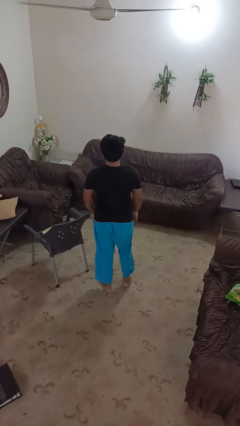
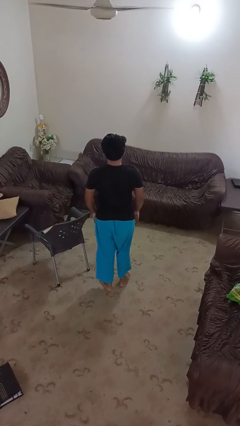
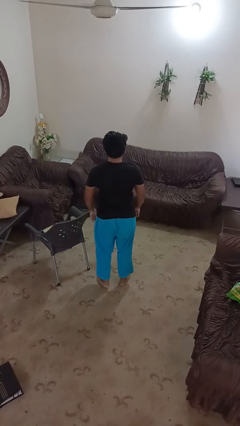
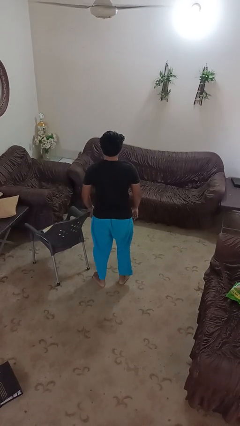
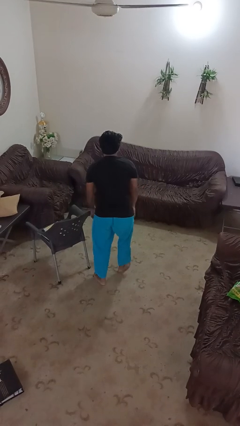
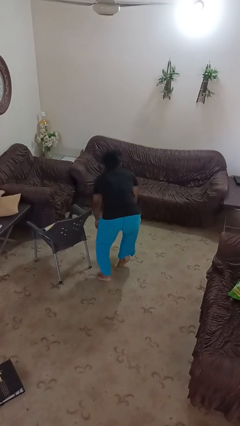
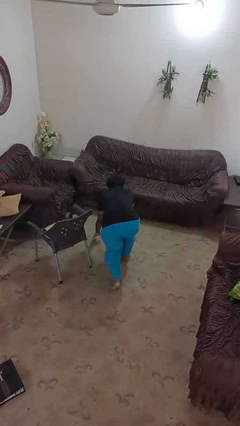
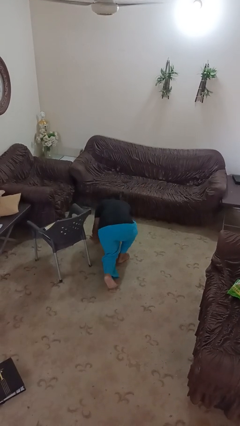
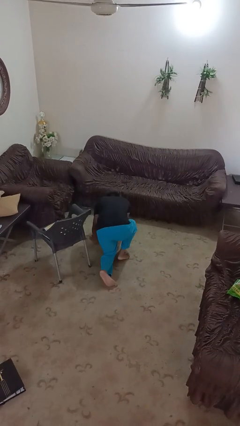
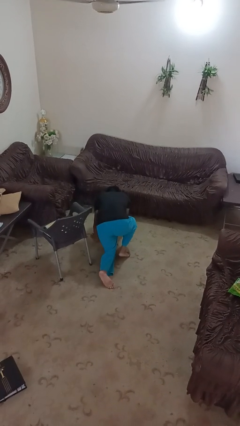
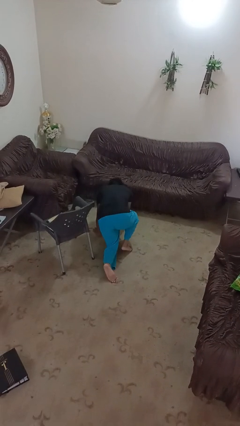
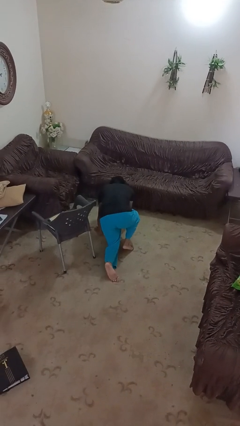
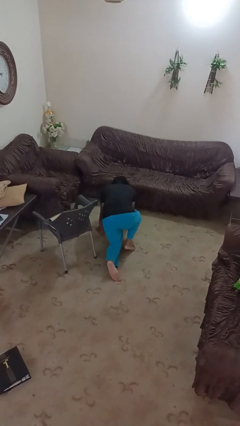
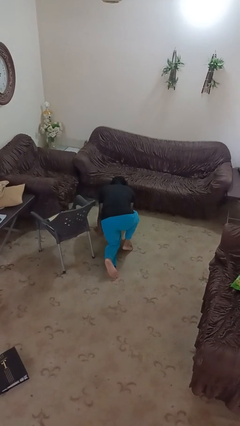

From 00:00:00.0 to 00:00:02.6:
person trips on object on floor

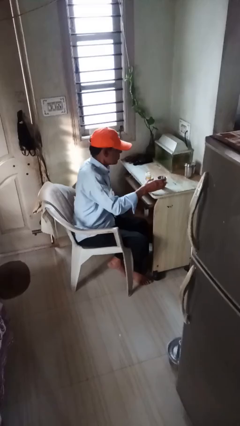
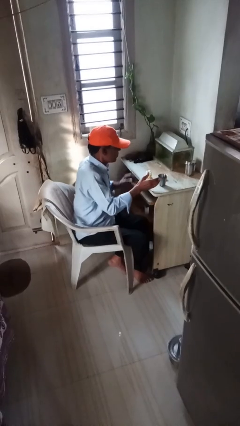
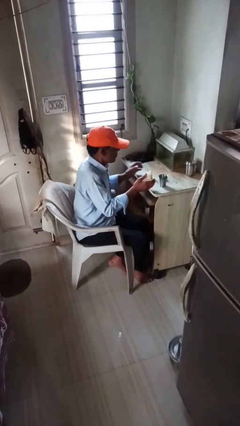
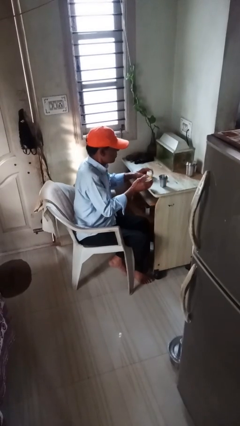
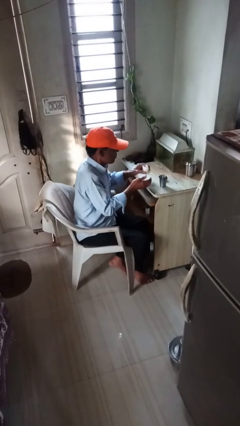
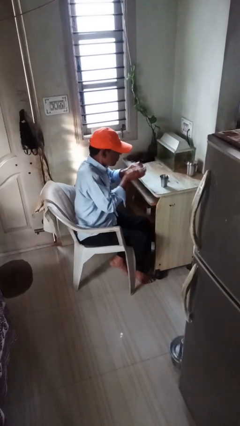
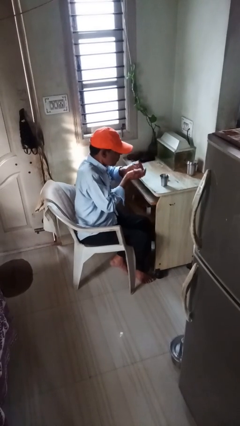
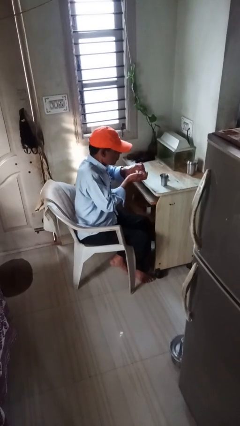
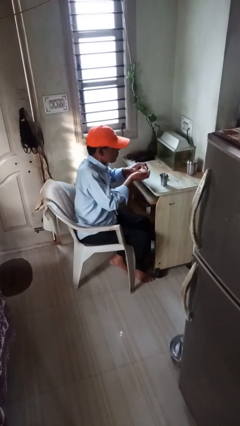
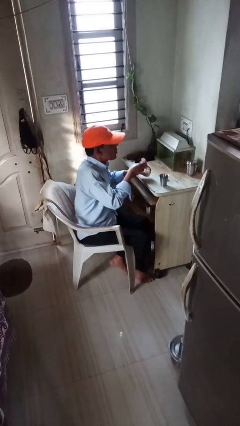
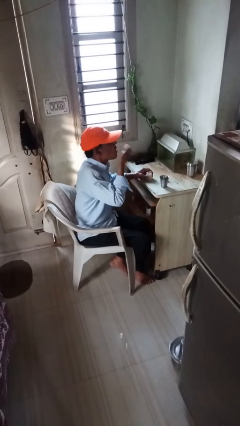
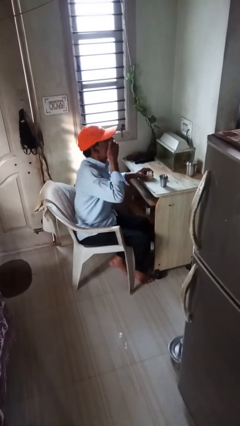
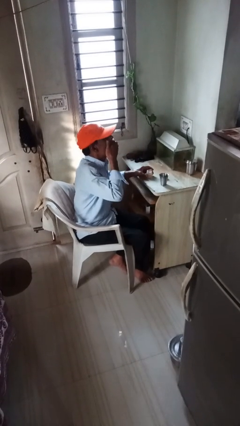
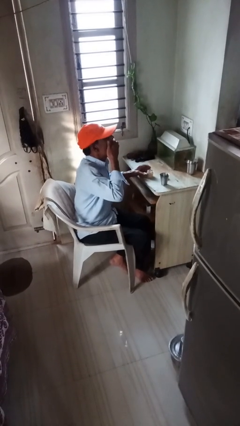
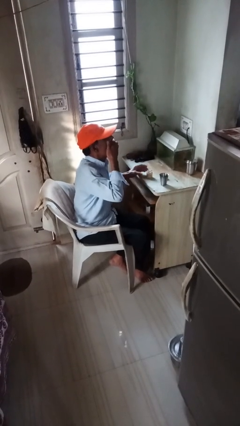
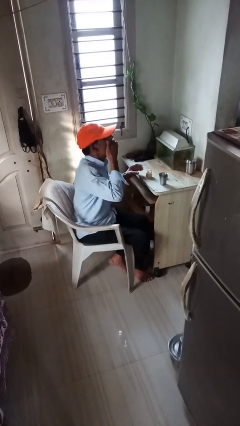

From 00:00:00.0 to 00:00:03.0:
person takes medicine pills

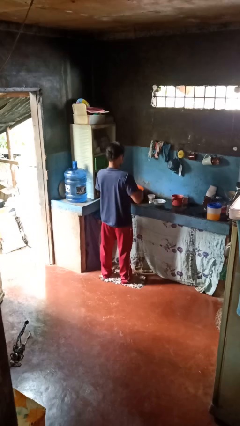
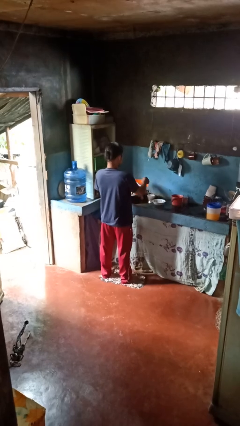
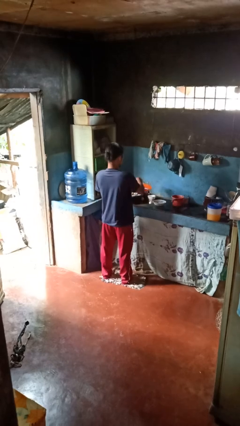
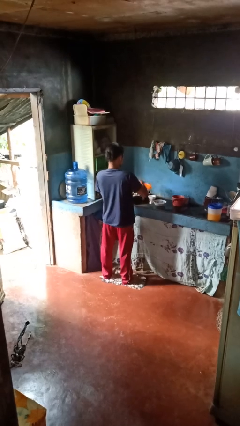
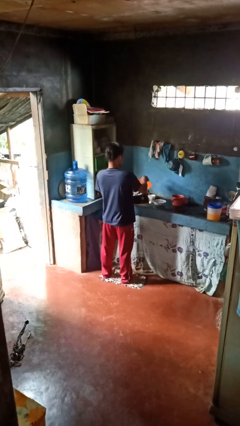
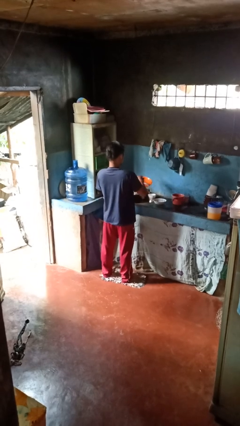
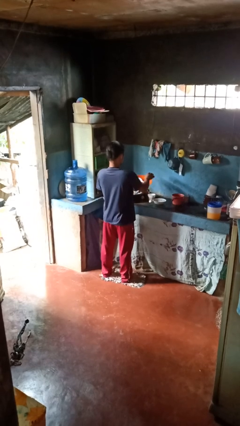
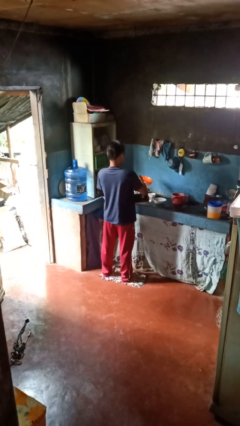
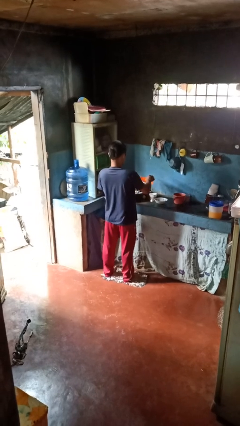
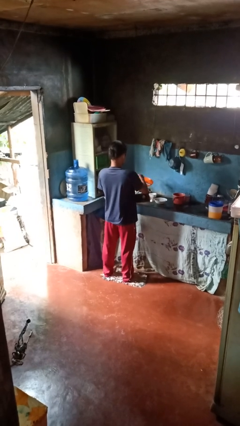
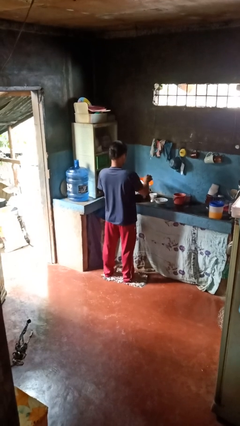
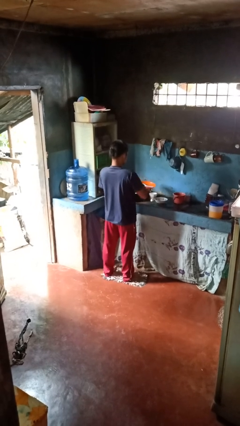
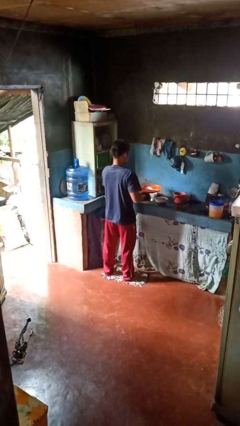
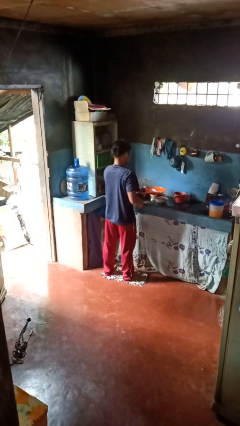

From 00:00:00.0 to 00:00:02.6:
person washes dish

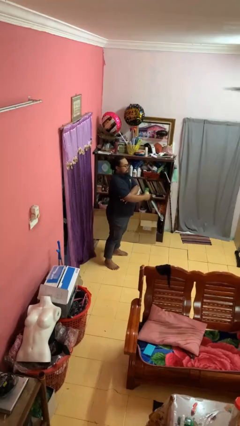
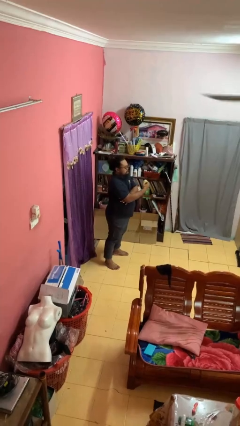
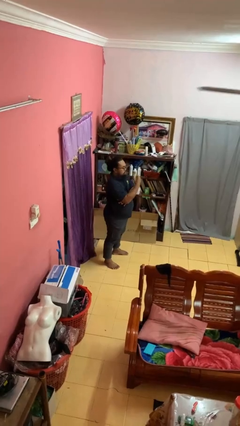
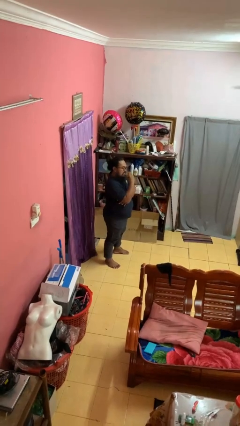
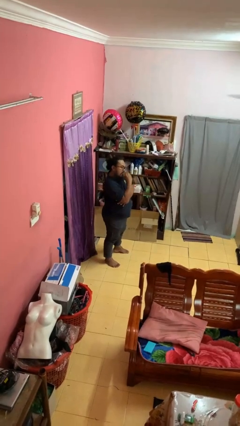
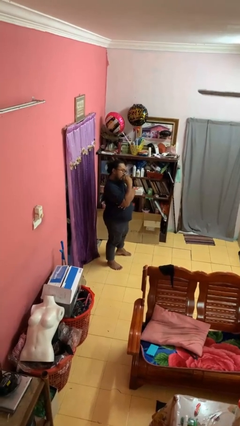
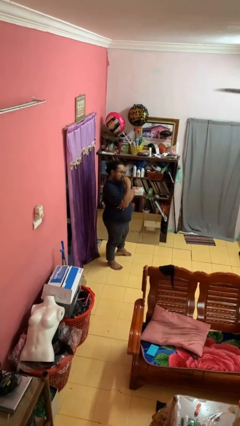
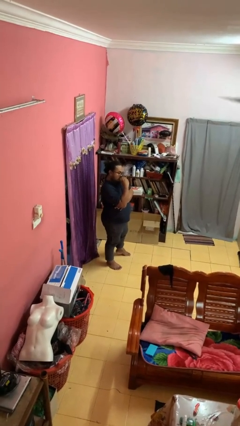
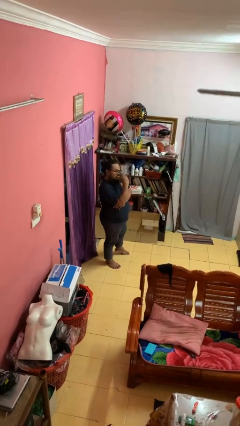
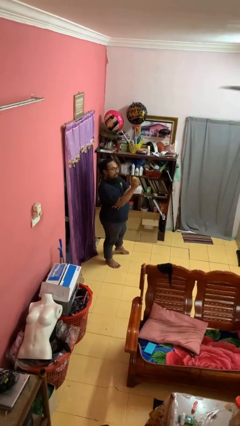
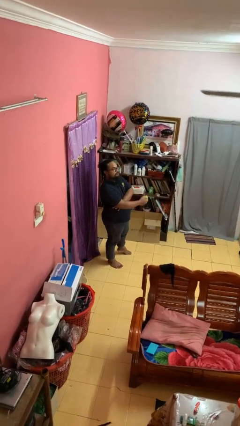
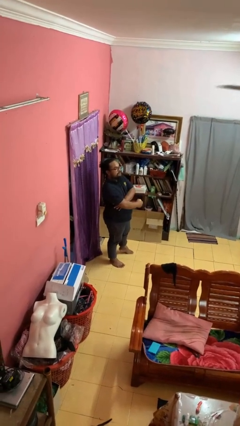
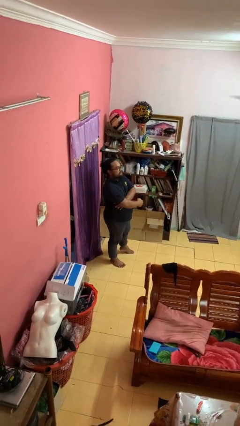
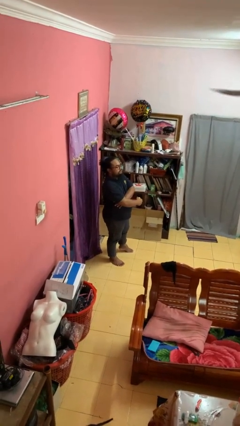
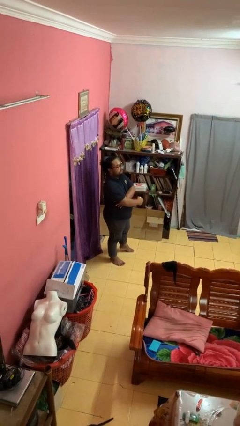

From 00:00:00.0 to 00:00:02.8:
person eats apple

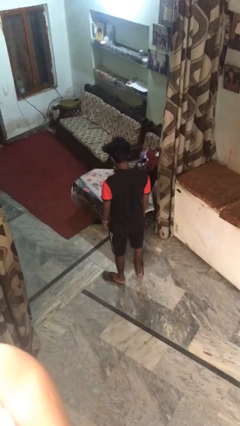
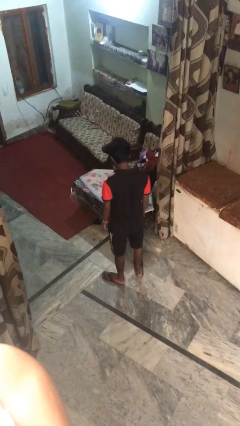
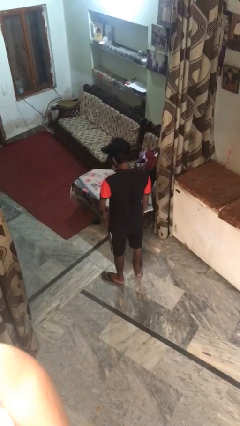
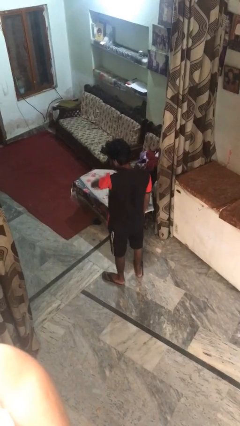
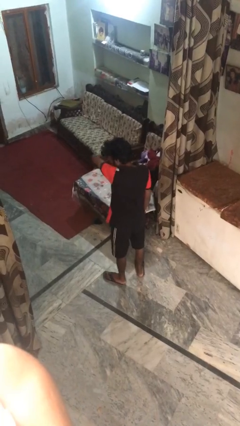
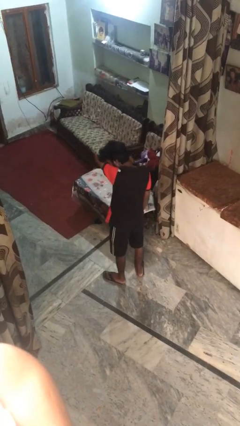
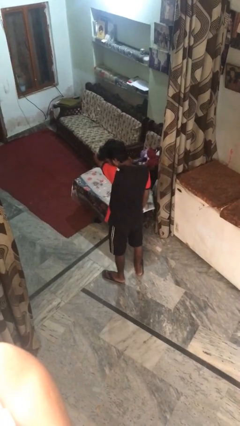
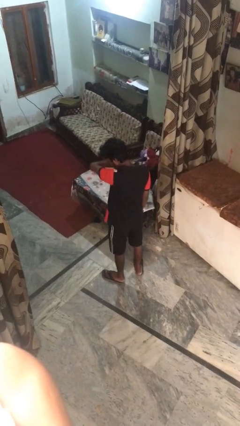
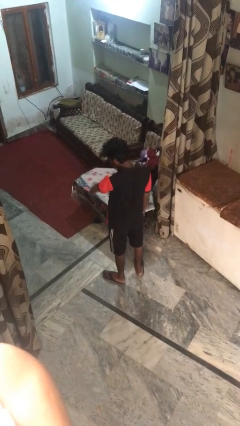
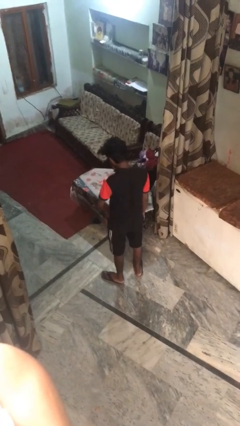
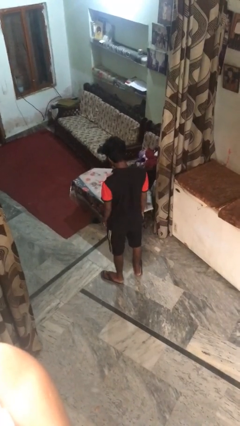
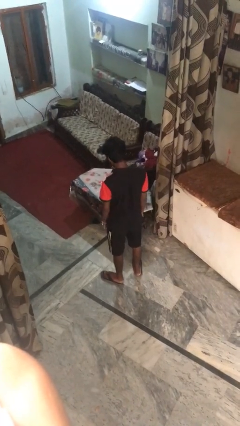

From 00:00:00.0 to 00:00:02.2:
person sneezes into arm

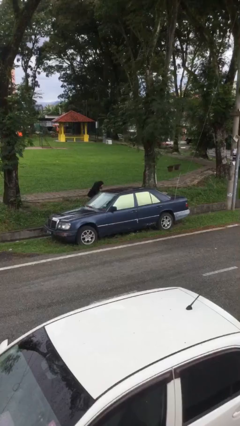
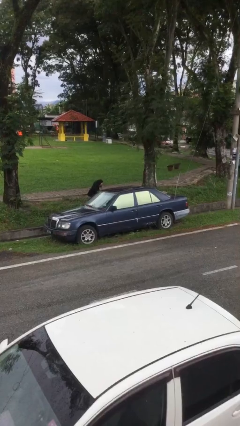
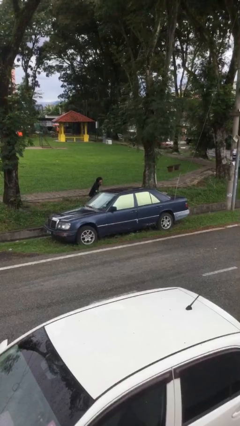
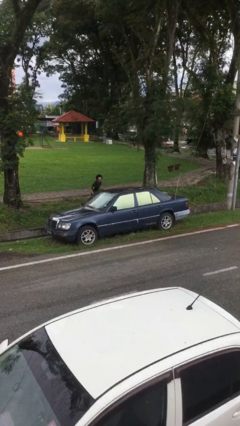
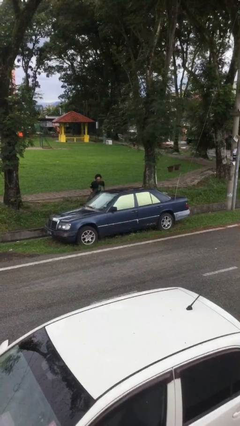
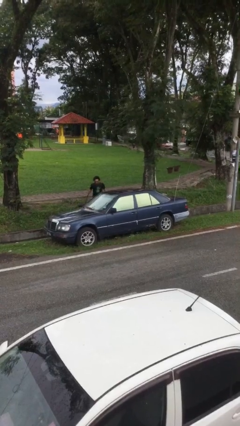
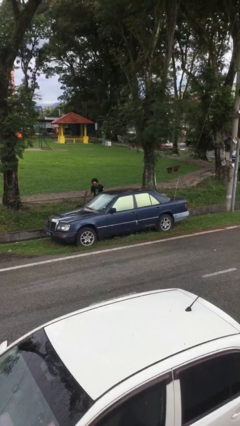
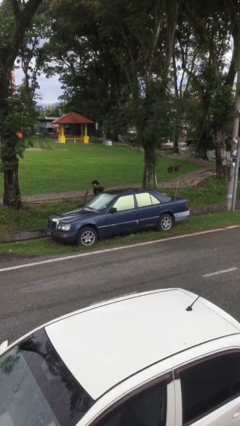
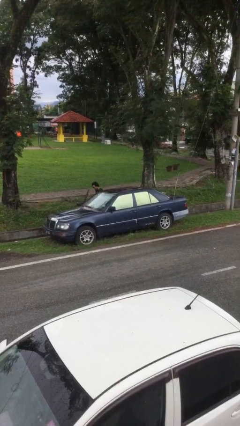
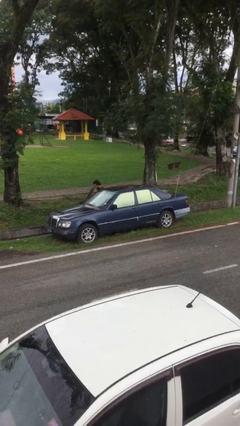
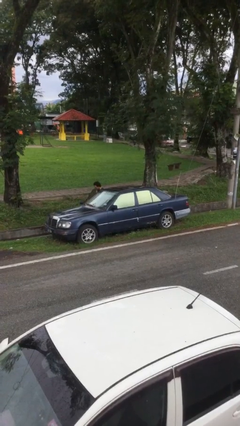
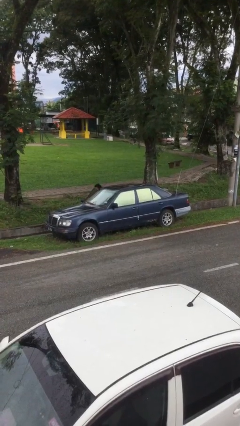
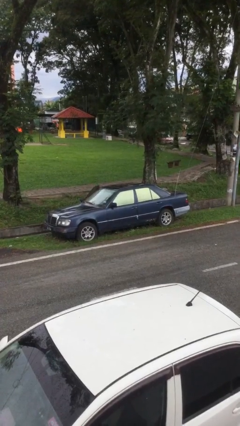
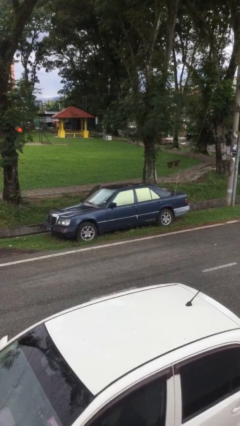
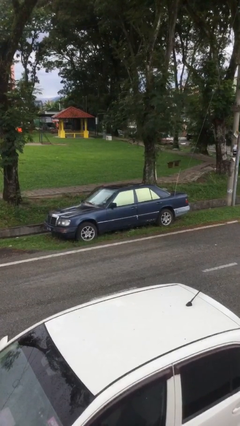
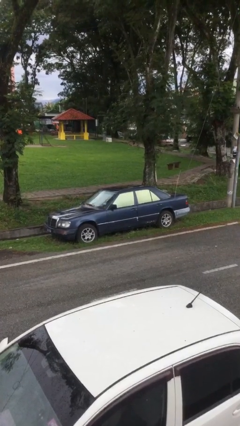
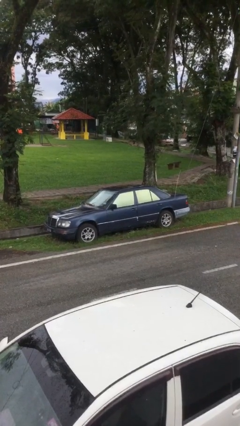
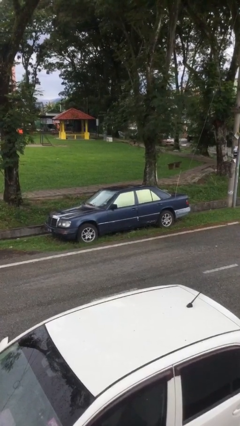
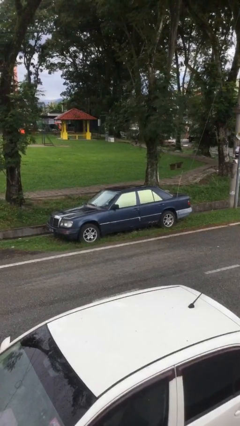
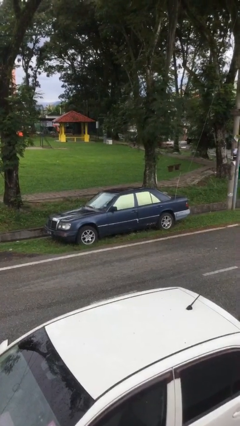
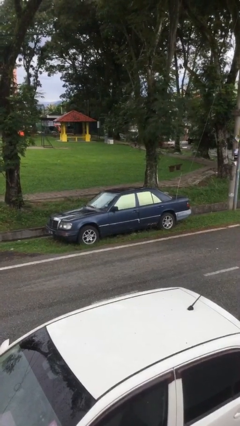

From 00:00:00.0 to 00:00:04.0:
car picks up person
